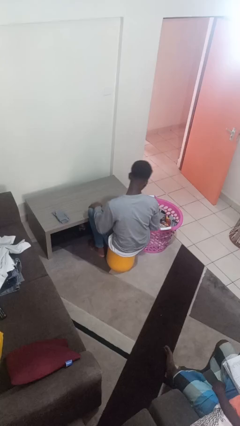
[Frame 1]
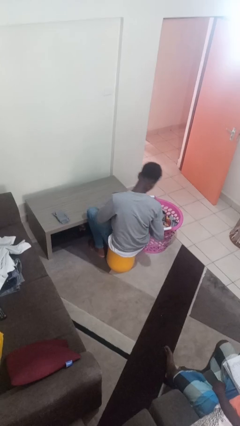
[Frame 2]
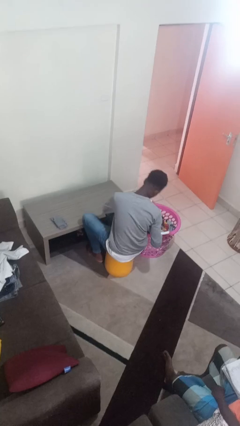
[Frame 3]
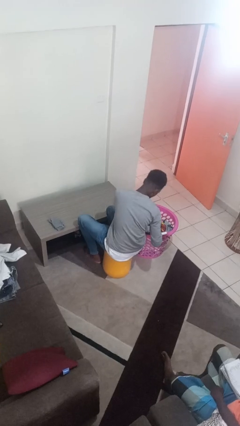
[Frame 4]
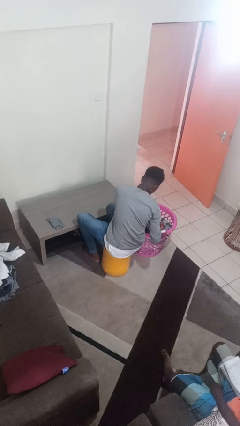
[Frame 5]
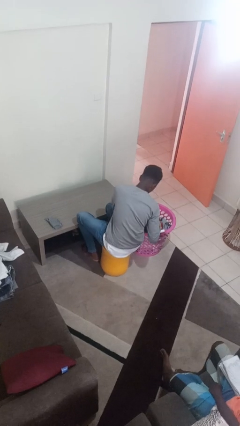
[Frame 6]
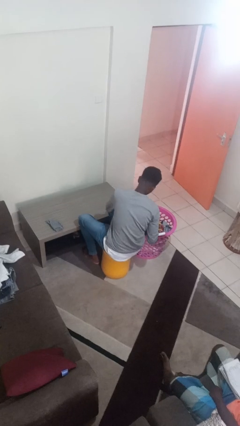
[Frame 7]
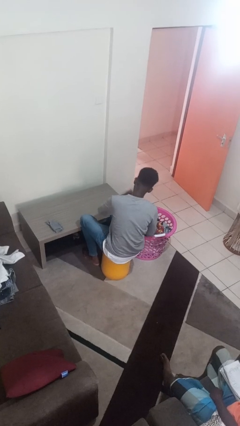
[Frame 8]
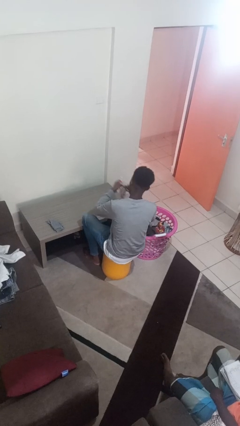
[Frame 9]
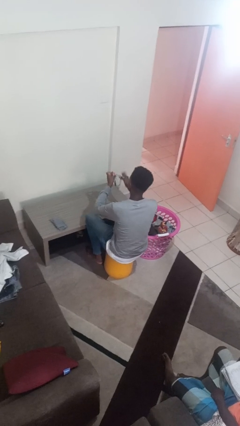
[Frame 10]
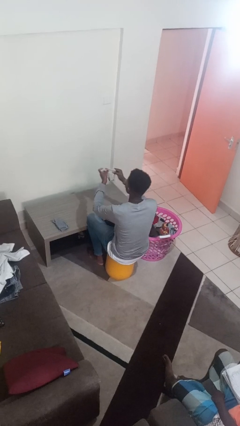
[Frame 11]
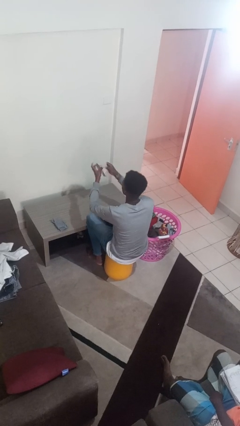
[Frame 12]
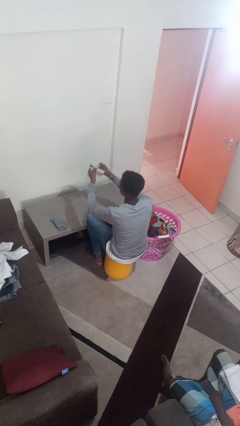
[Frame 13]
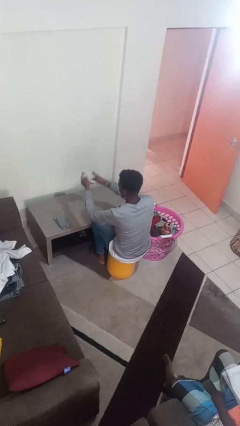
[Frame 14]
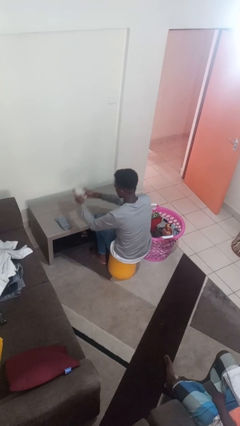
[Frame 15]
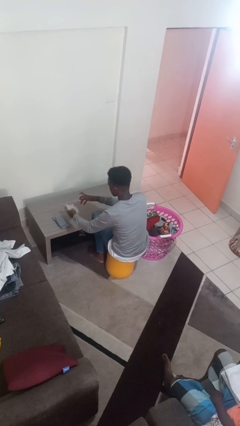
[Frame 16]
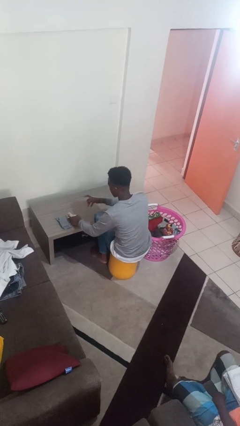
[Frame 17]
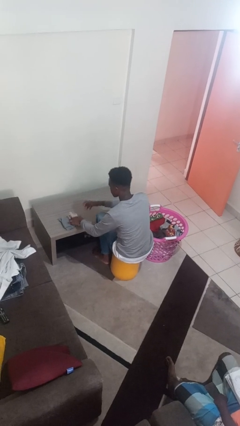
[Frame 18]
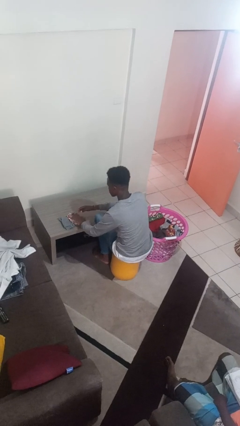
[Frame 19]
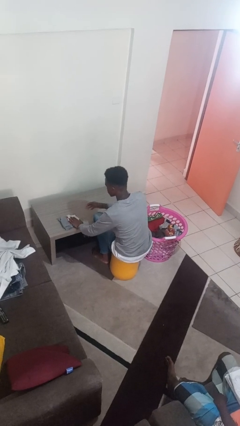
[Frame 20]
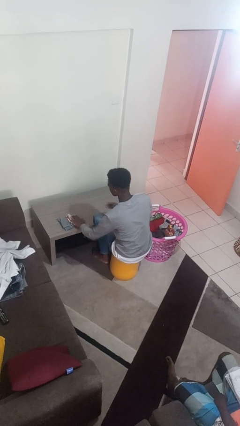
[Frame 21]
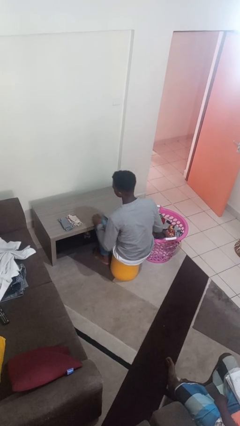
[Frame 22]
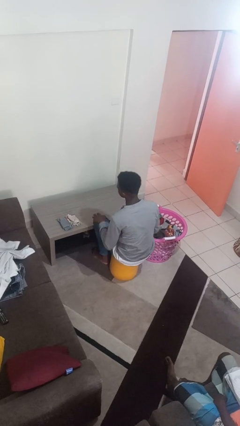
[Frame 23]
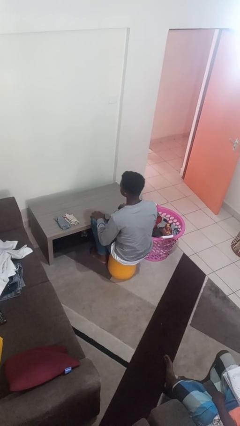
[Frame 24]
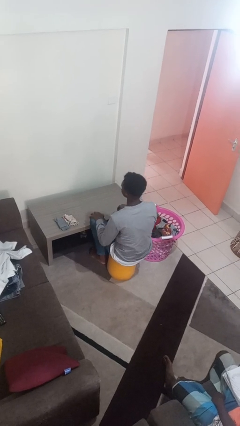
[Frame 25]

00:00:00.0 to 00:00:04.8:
person folds socks

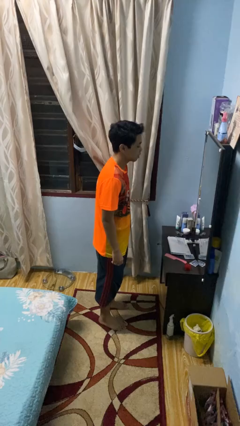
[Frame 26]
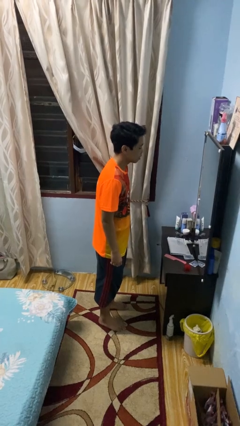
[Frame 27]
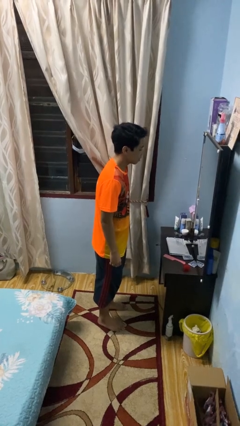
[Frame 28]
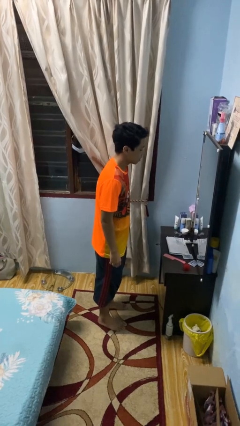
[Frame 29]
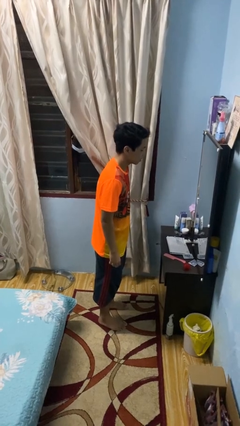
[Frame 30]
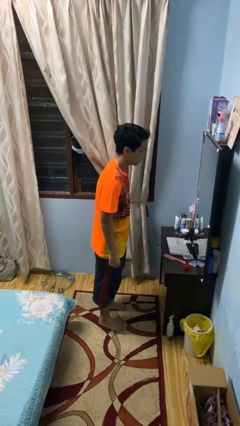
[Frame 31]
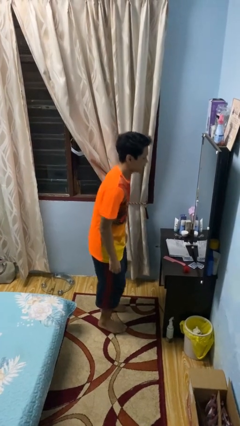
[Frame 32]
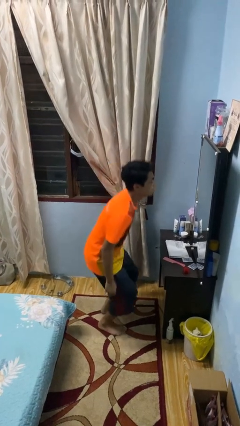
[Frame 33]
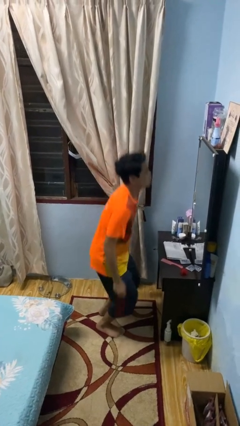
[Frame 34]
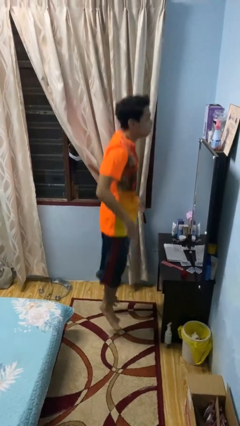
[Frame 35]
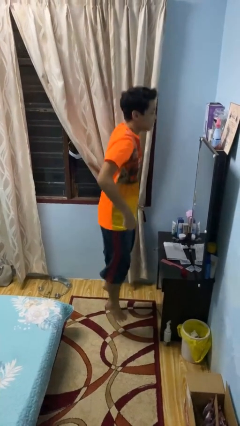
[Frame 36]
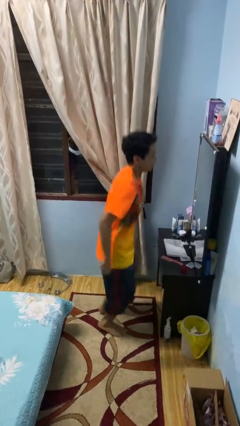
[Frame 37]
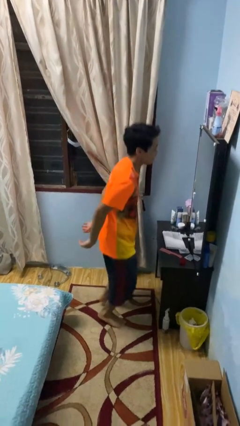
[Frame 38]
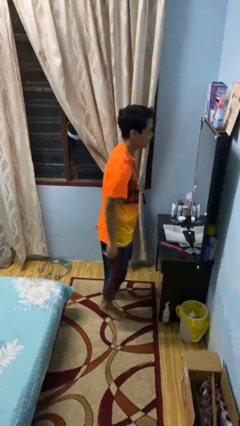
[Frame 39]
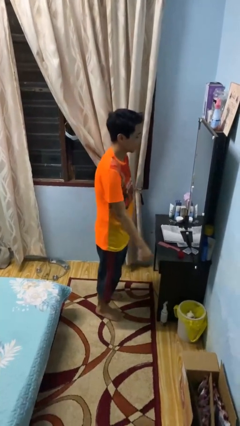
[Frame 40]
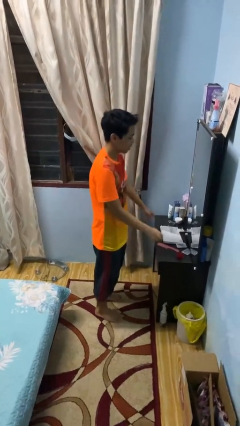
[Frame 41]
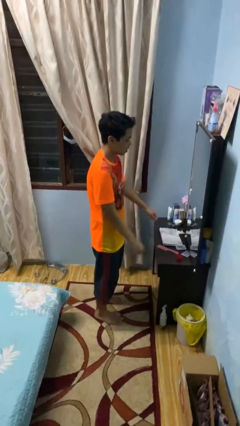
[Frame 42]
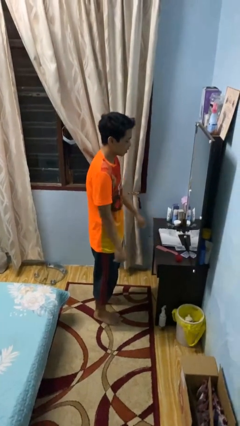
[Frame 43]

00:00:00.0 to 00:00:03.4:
person jumps

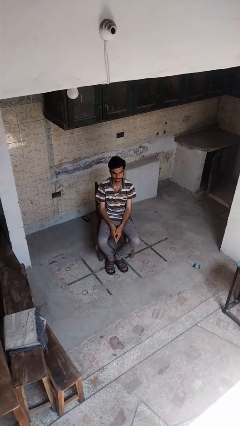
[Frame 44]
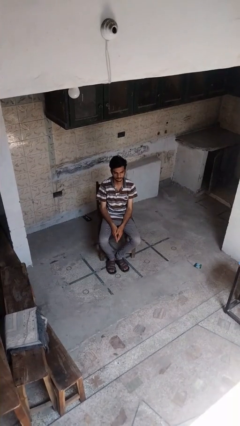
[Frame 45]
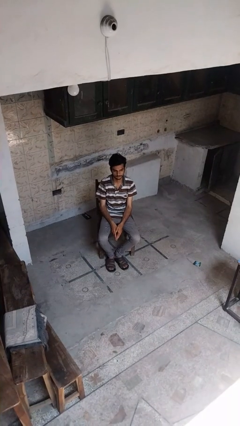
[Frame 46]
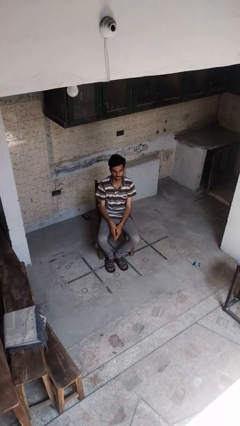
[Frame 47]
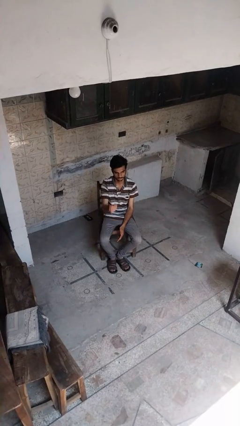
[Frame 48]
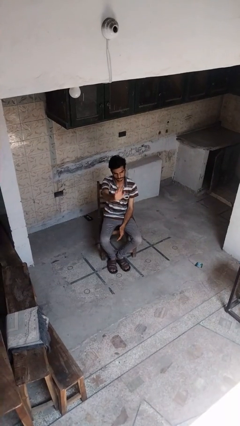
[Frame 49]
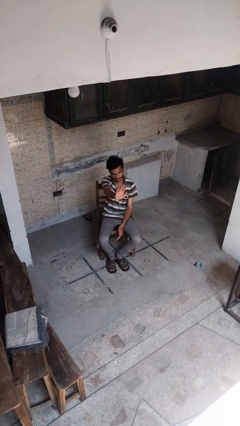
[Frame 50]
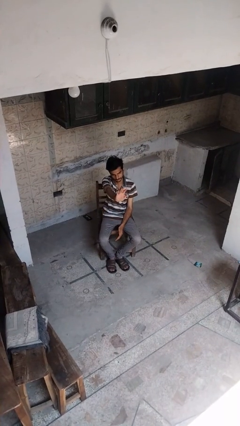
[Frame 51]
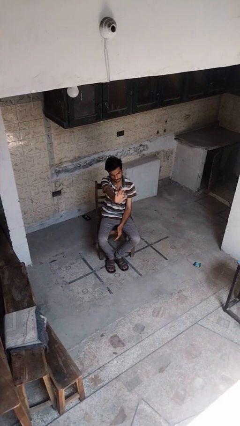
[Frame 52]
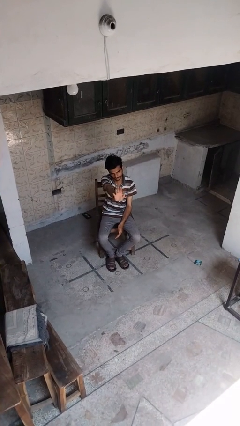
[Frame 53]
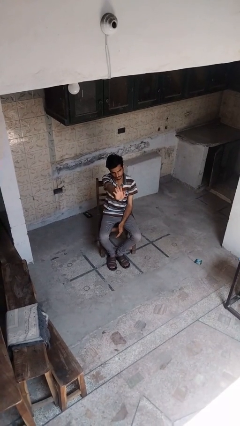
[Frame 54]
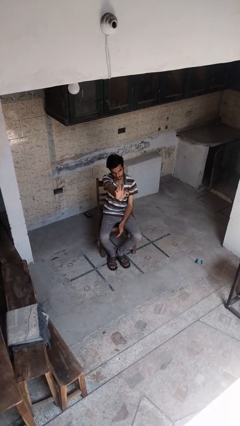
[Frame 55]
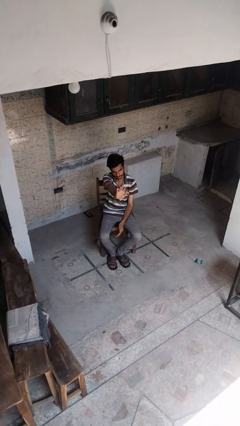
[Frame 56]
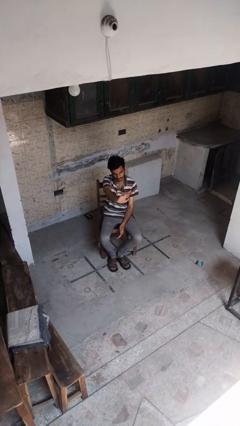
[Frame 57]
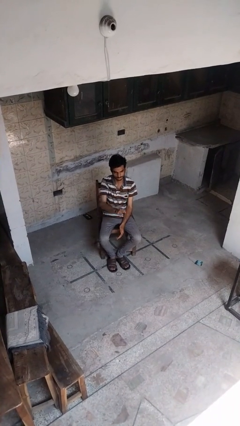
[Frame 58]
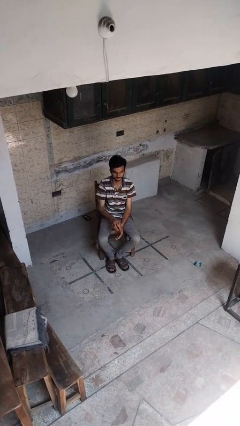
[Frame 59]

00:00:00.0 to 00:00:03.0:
person waves at person

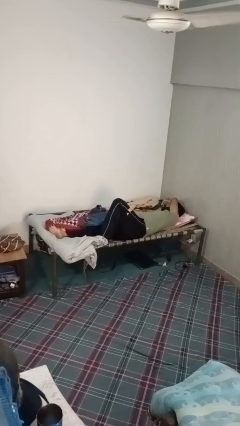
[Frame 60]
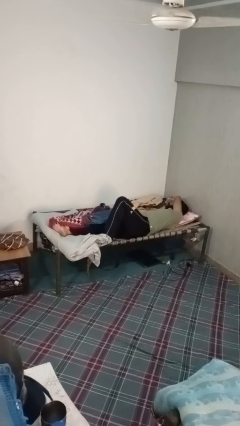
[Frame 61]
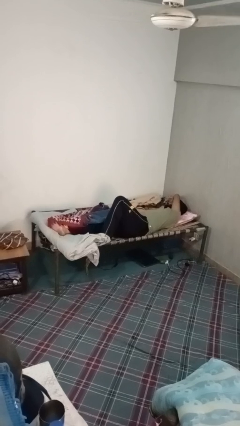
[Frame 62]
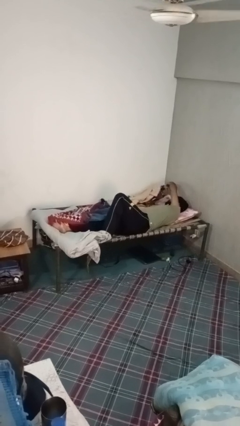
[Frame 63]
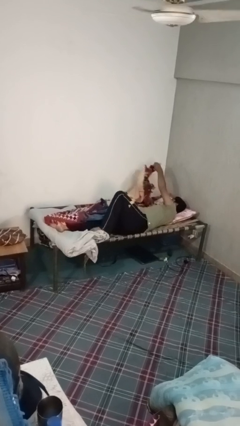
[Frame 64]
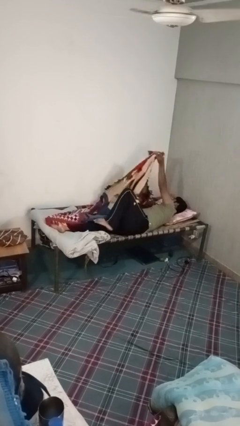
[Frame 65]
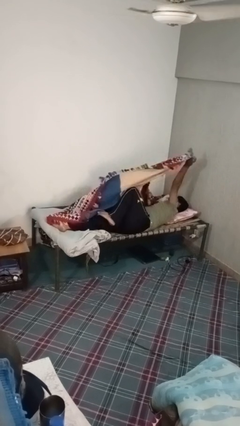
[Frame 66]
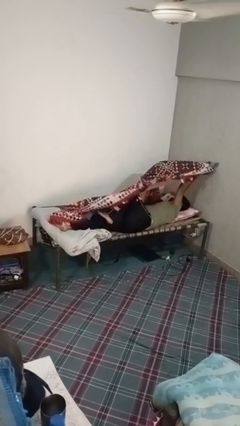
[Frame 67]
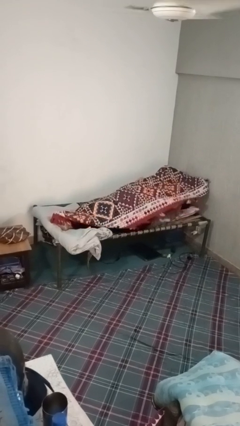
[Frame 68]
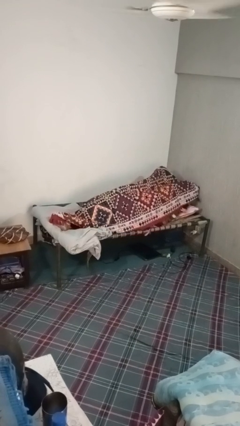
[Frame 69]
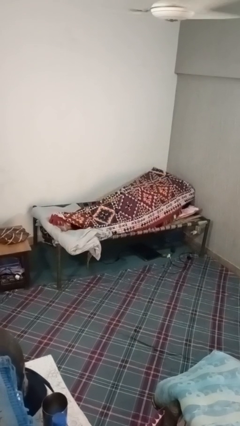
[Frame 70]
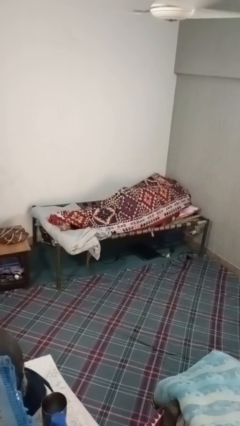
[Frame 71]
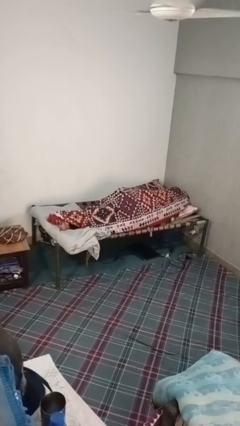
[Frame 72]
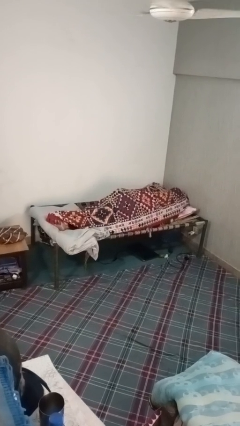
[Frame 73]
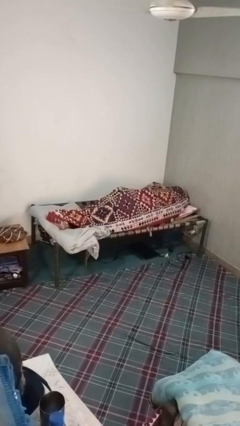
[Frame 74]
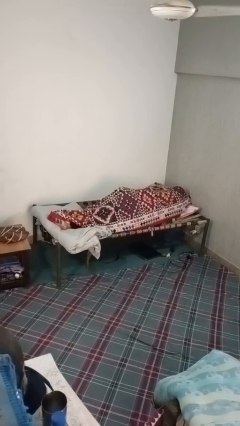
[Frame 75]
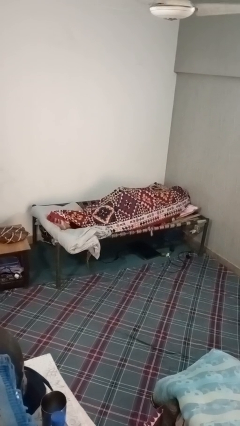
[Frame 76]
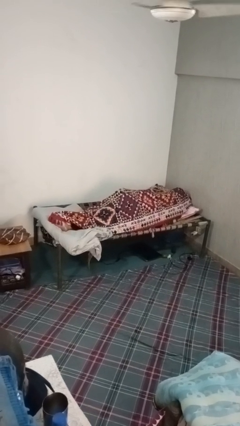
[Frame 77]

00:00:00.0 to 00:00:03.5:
person covers with blanket

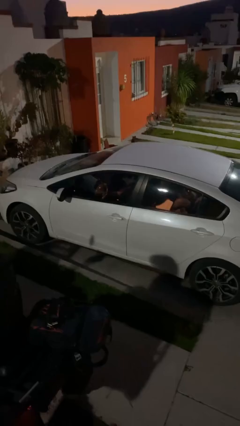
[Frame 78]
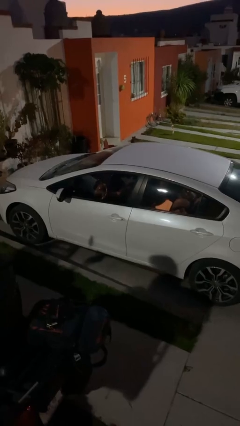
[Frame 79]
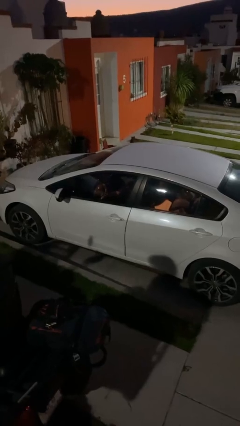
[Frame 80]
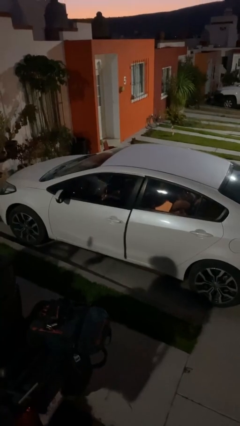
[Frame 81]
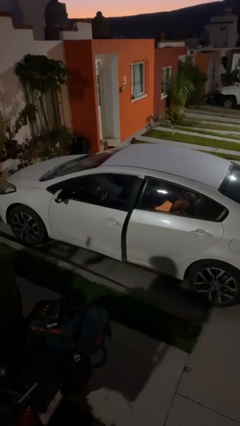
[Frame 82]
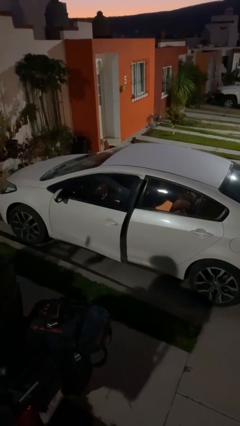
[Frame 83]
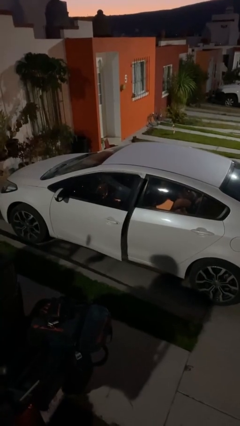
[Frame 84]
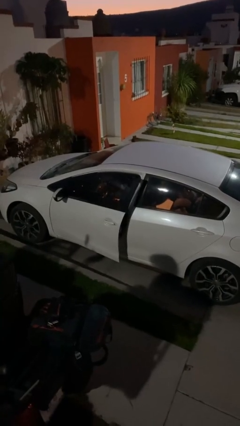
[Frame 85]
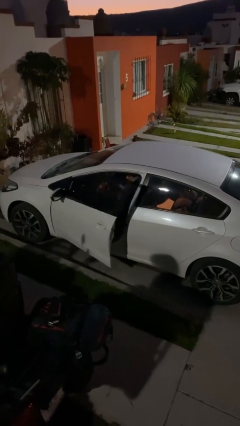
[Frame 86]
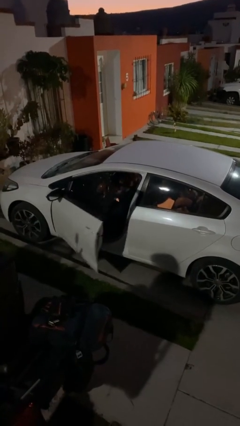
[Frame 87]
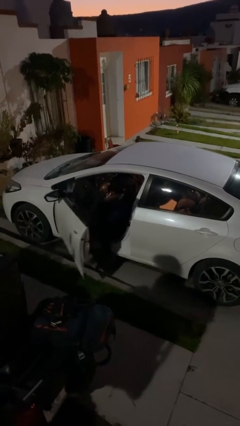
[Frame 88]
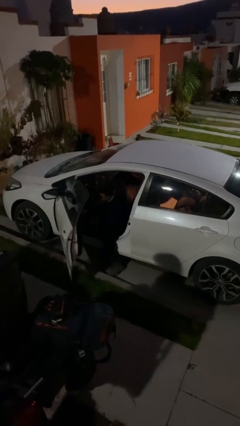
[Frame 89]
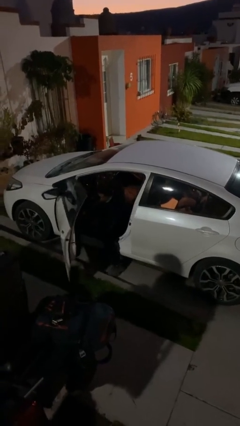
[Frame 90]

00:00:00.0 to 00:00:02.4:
person opens car door

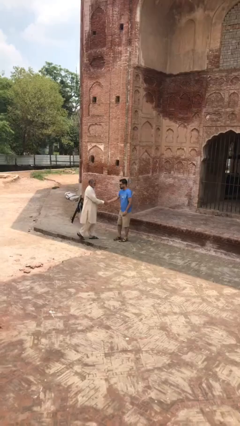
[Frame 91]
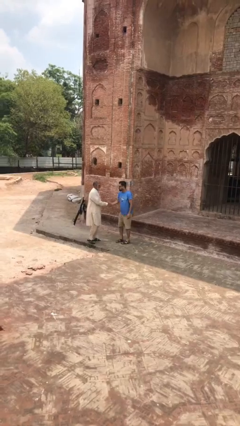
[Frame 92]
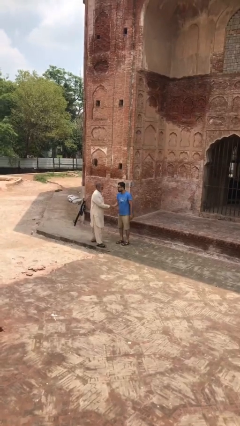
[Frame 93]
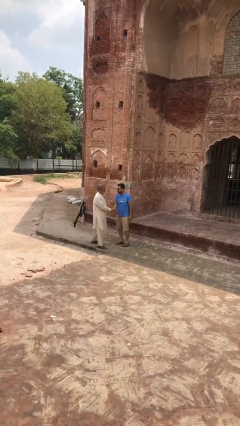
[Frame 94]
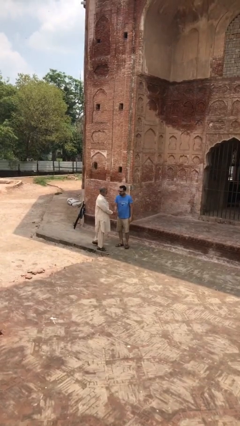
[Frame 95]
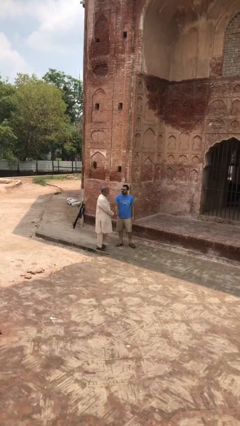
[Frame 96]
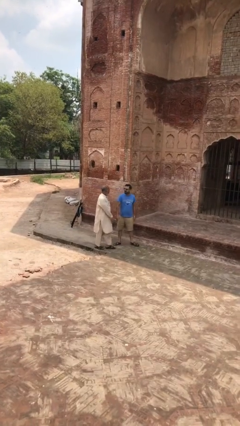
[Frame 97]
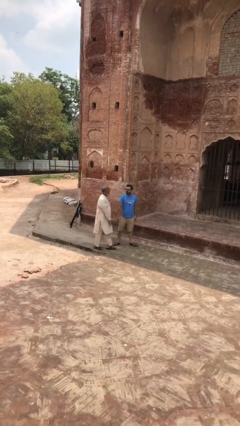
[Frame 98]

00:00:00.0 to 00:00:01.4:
person shakes hand
